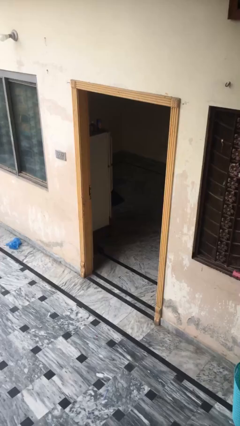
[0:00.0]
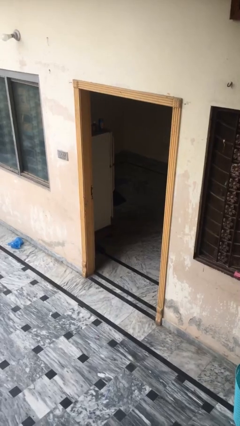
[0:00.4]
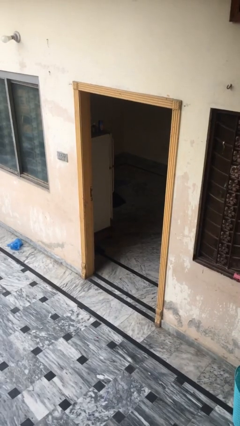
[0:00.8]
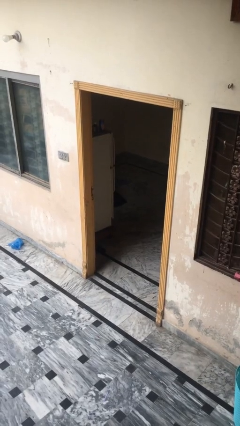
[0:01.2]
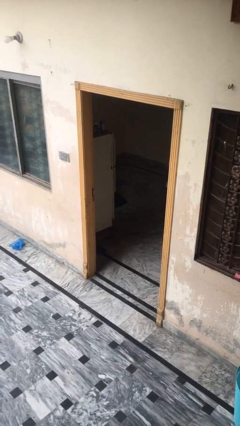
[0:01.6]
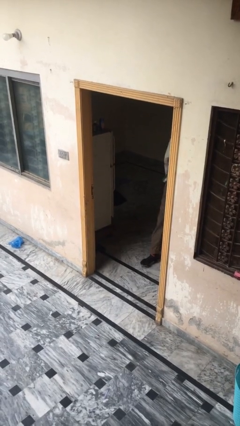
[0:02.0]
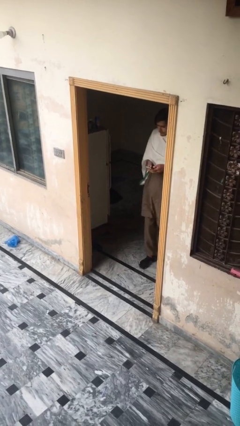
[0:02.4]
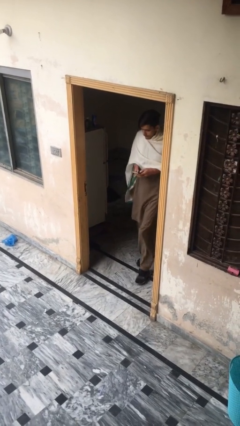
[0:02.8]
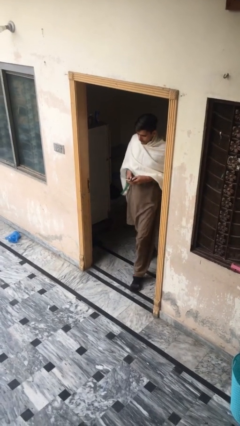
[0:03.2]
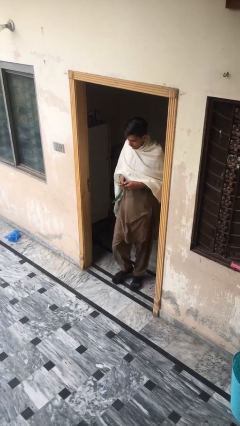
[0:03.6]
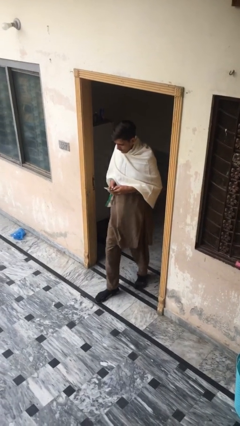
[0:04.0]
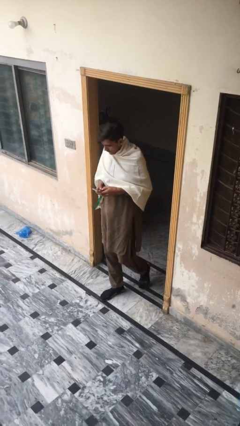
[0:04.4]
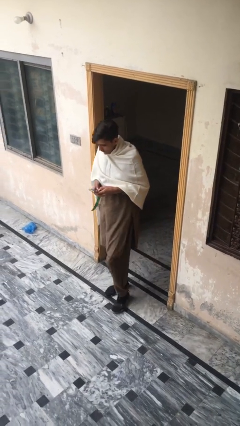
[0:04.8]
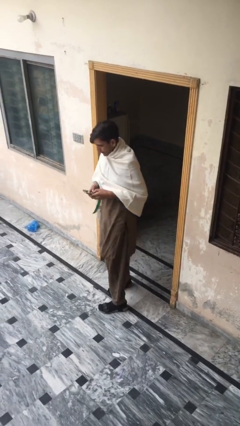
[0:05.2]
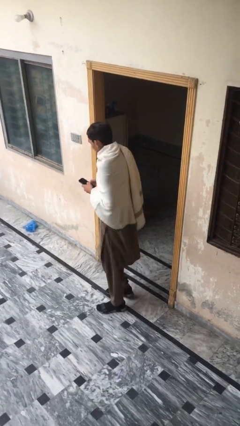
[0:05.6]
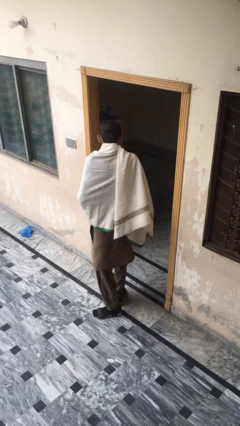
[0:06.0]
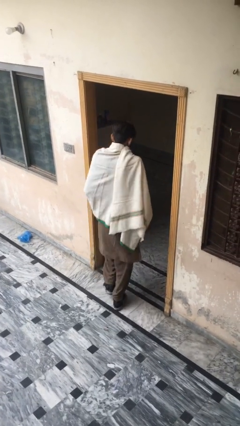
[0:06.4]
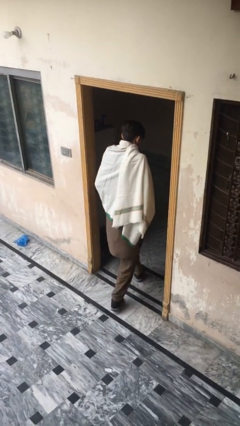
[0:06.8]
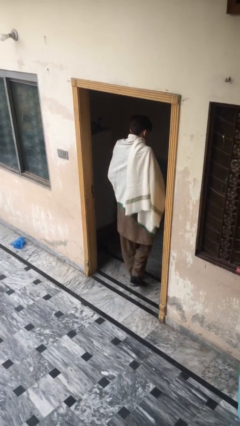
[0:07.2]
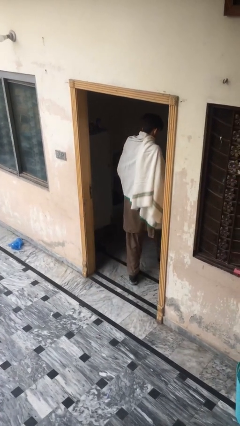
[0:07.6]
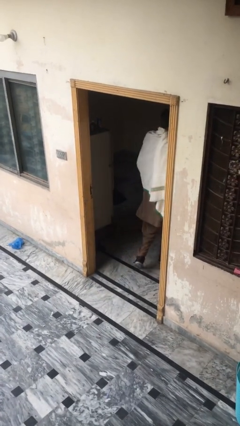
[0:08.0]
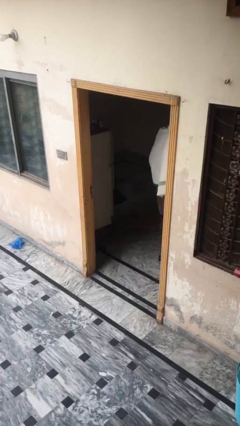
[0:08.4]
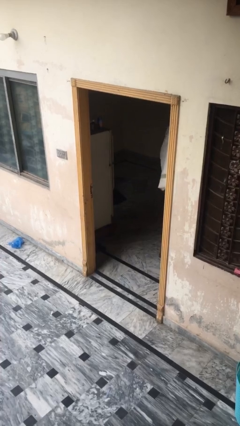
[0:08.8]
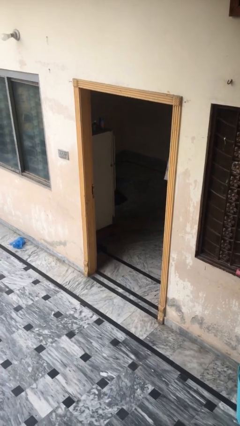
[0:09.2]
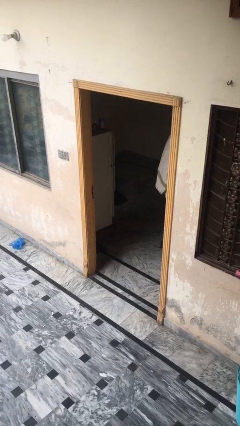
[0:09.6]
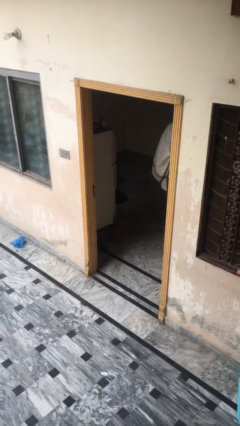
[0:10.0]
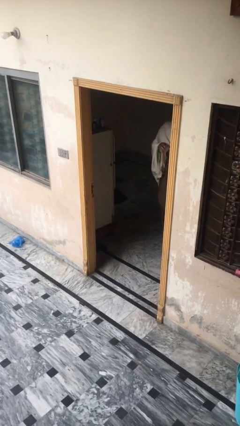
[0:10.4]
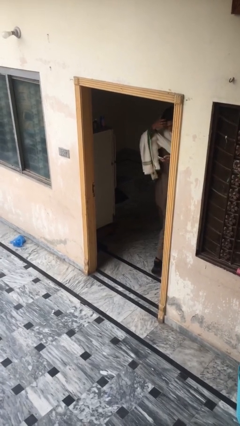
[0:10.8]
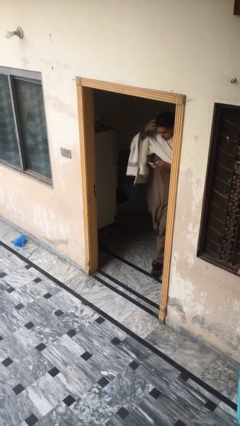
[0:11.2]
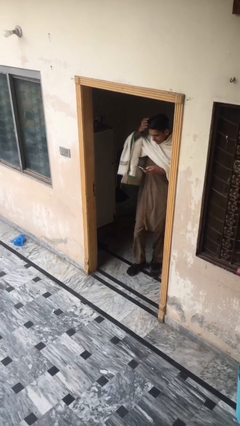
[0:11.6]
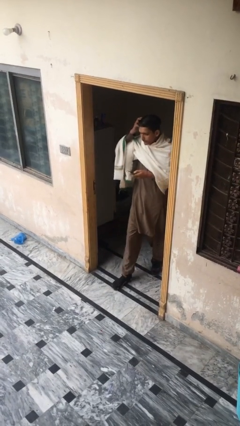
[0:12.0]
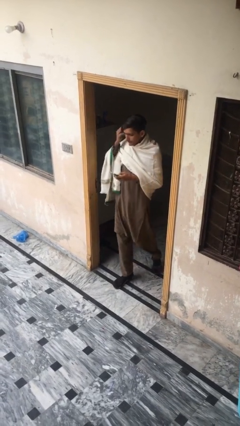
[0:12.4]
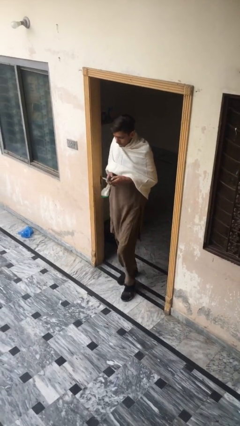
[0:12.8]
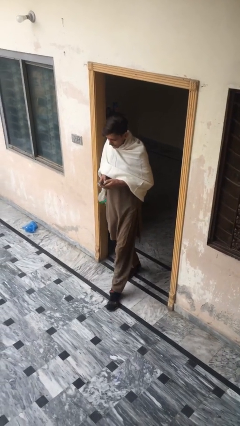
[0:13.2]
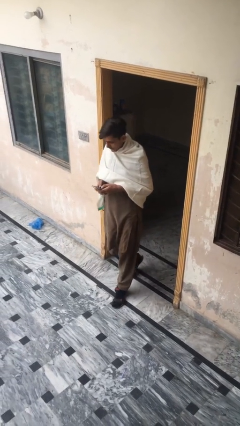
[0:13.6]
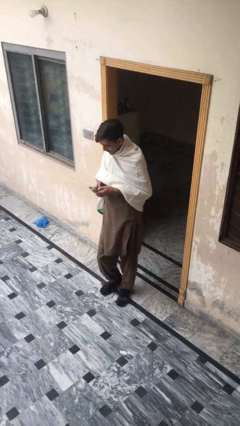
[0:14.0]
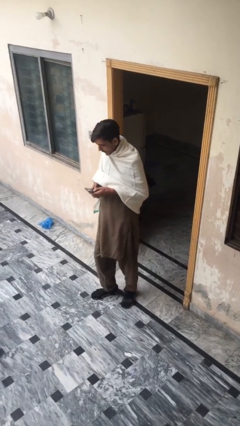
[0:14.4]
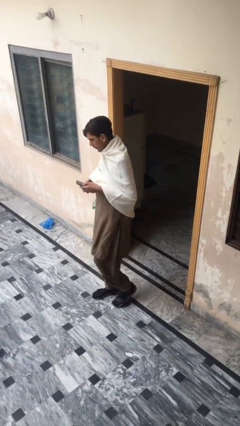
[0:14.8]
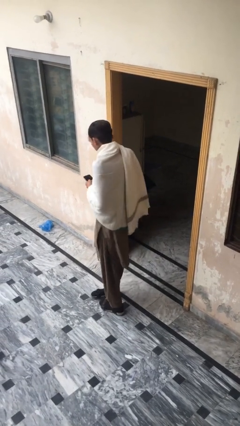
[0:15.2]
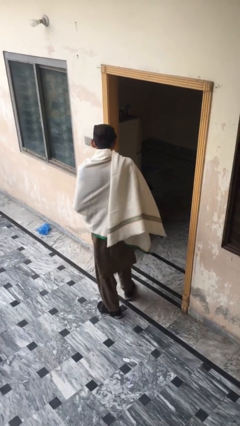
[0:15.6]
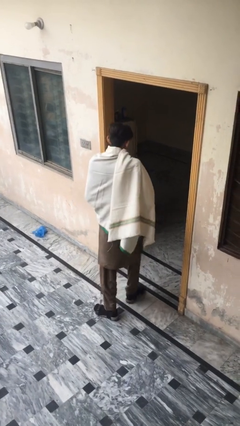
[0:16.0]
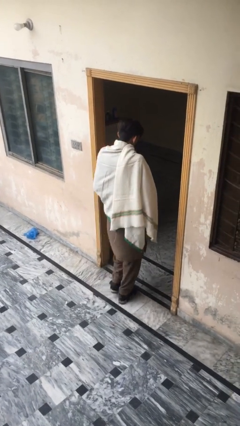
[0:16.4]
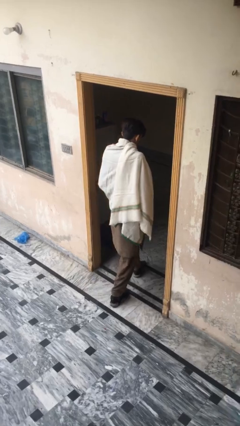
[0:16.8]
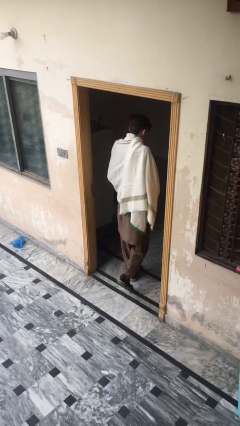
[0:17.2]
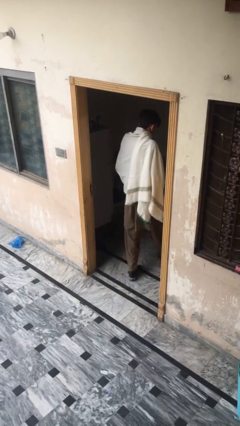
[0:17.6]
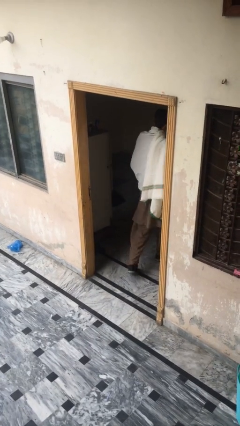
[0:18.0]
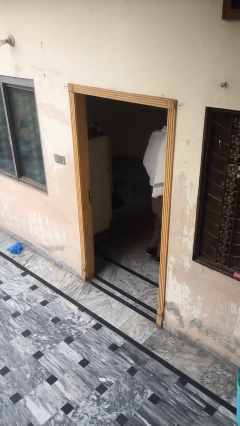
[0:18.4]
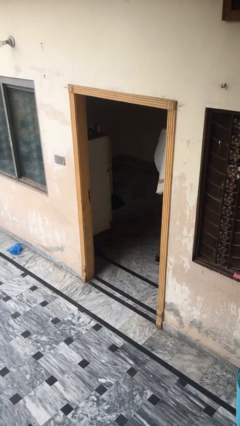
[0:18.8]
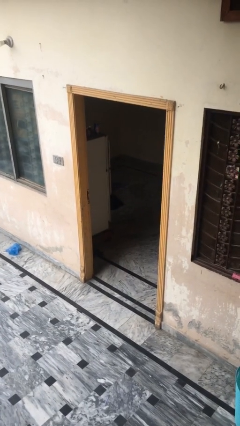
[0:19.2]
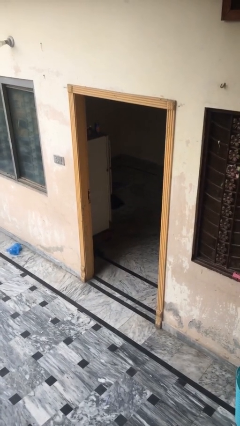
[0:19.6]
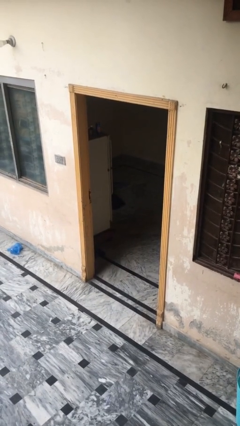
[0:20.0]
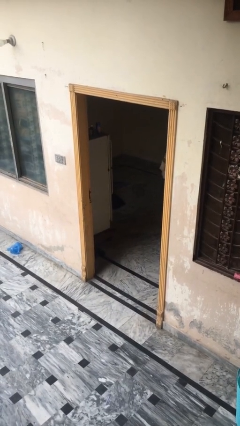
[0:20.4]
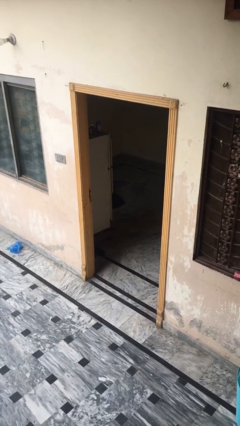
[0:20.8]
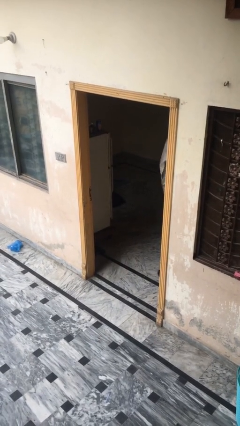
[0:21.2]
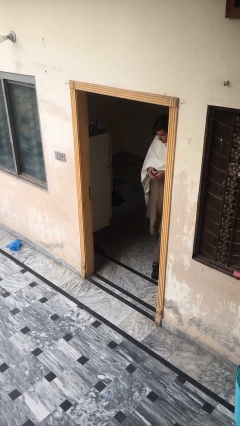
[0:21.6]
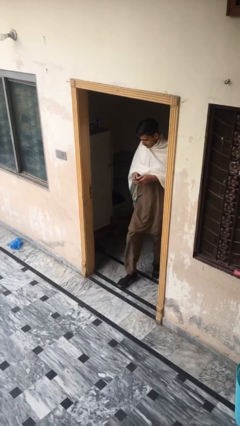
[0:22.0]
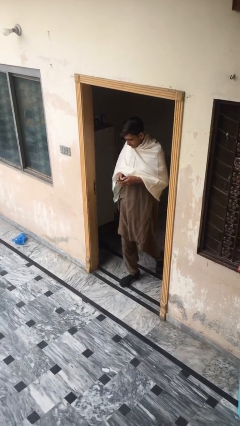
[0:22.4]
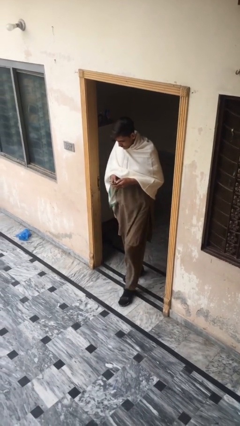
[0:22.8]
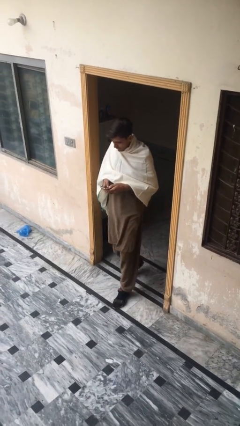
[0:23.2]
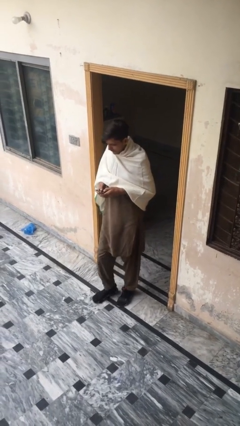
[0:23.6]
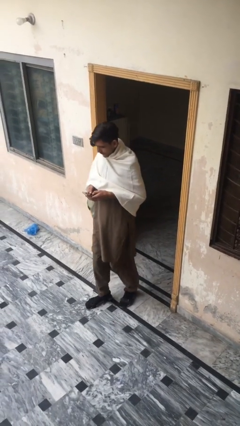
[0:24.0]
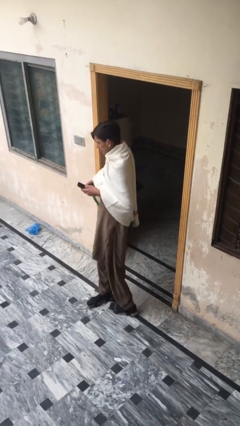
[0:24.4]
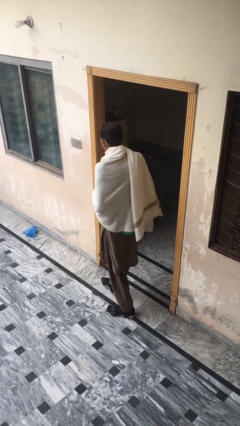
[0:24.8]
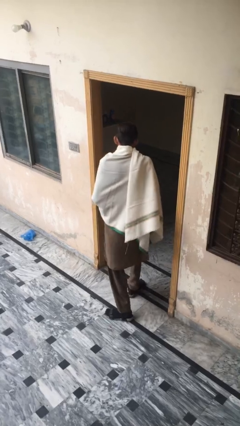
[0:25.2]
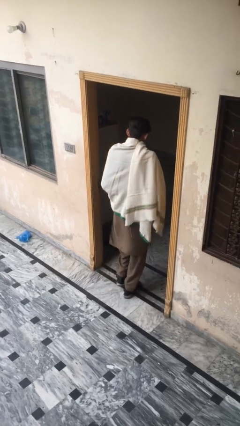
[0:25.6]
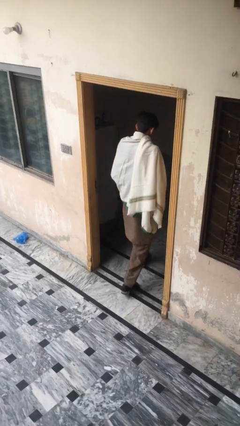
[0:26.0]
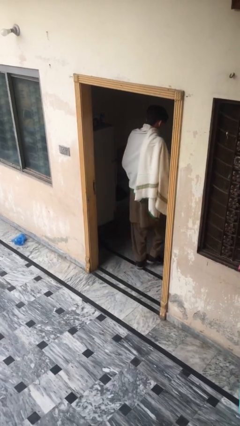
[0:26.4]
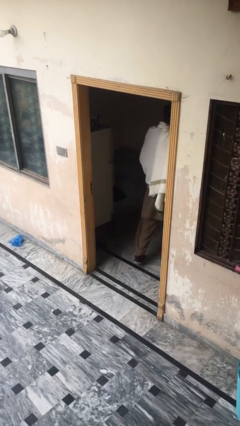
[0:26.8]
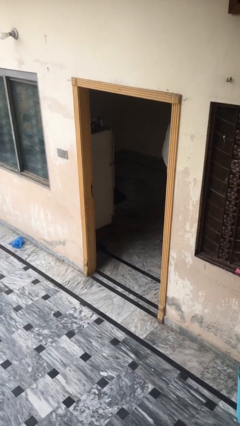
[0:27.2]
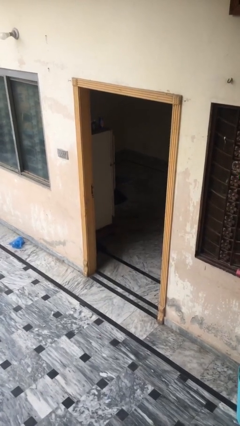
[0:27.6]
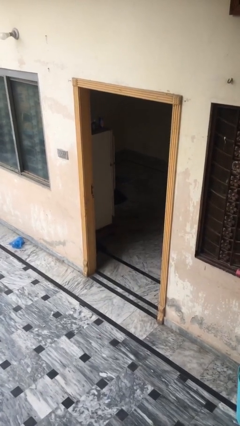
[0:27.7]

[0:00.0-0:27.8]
person texts on phone

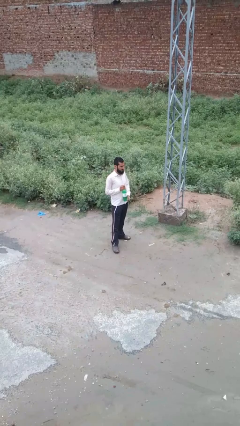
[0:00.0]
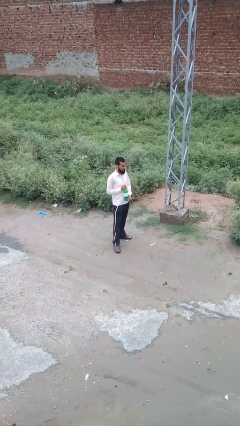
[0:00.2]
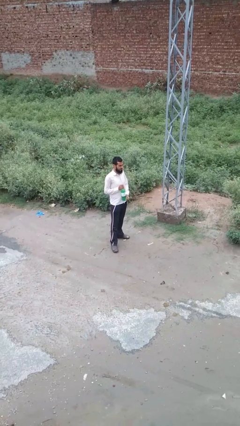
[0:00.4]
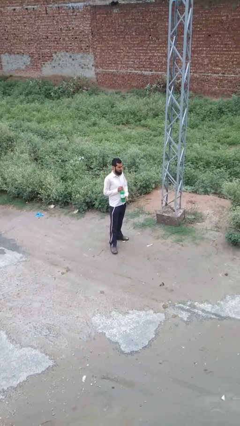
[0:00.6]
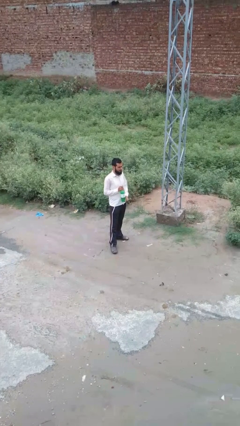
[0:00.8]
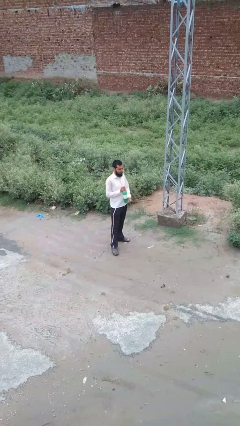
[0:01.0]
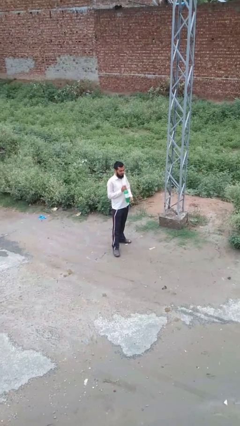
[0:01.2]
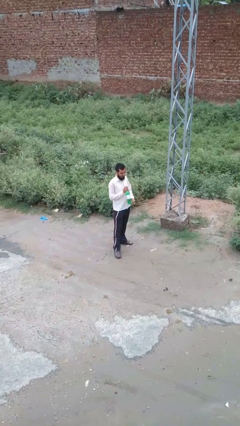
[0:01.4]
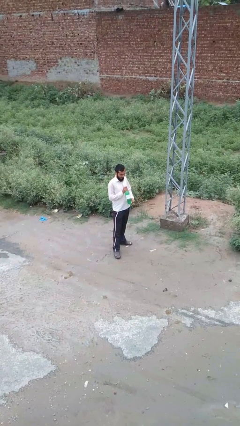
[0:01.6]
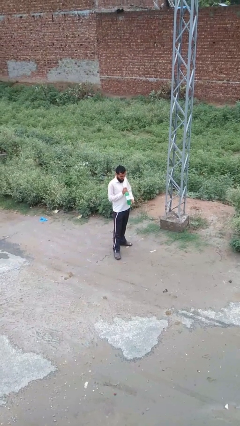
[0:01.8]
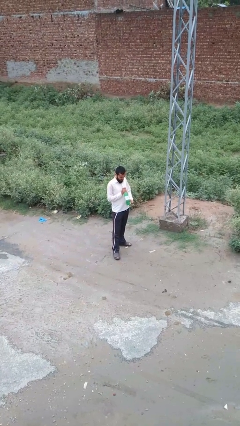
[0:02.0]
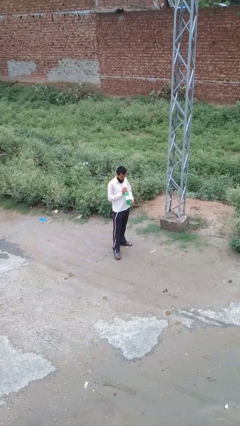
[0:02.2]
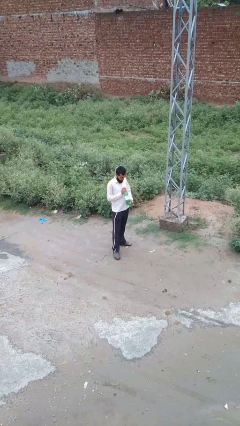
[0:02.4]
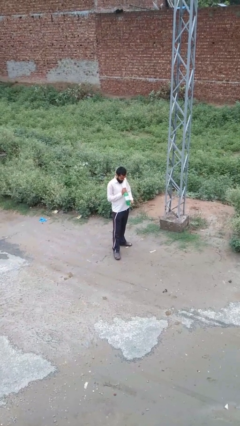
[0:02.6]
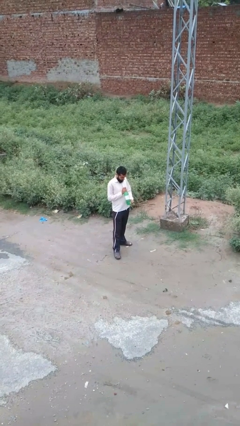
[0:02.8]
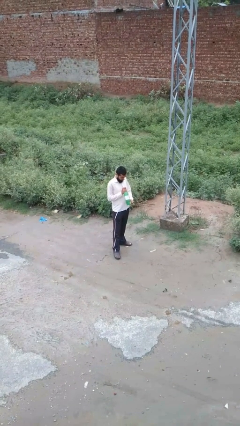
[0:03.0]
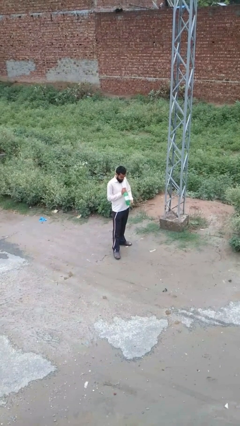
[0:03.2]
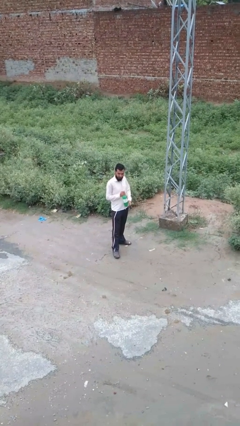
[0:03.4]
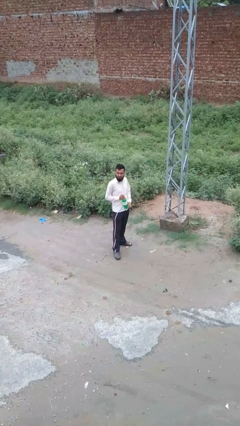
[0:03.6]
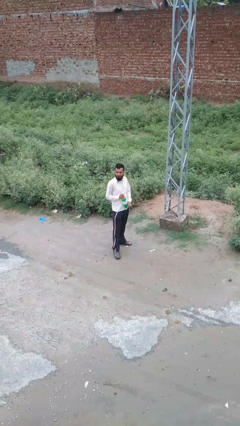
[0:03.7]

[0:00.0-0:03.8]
person drinks from straw
